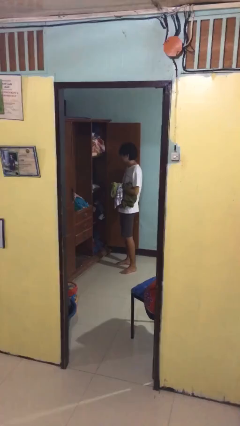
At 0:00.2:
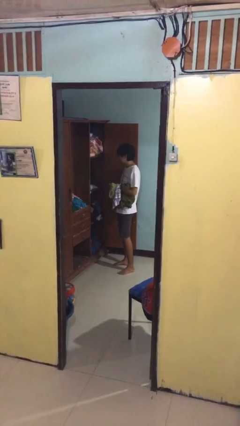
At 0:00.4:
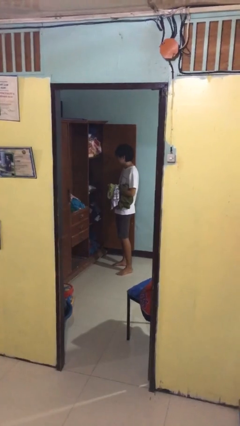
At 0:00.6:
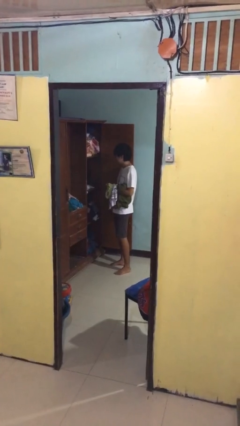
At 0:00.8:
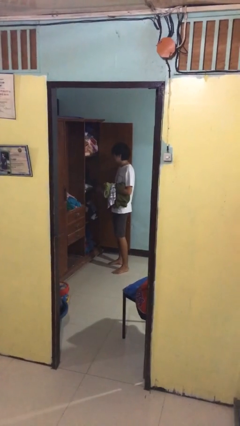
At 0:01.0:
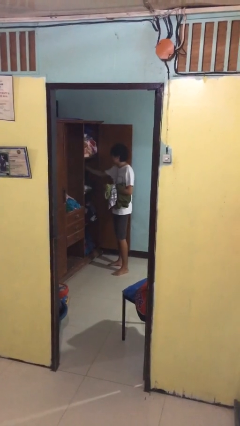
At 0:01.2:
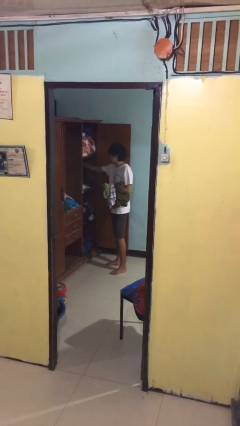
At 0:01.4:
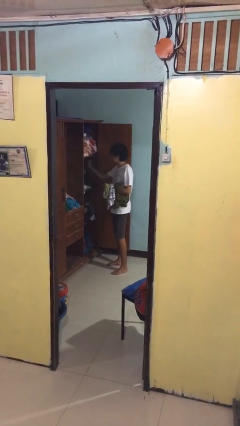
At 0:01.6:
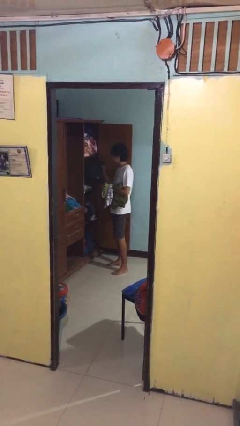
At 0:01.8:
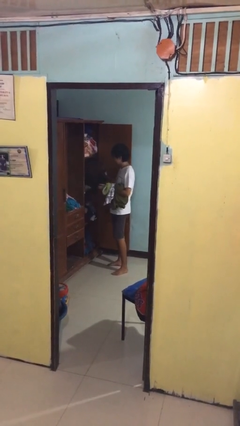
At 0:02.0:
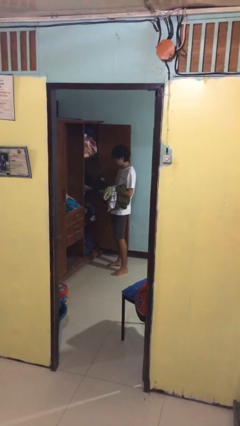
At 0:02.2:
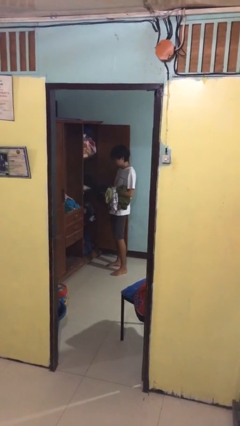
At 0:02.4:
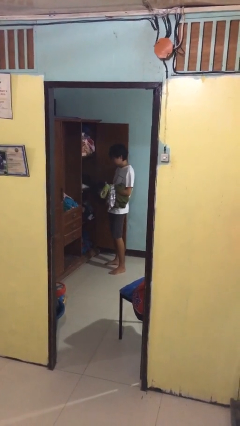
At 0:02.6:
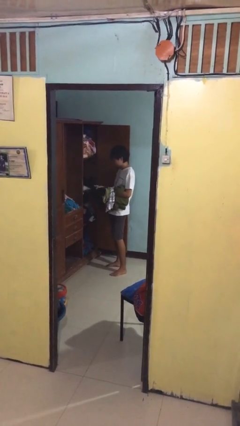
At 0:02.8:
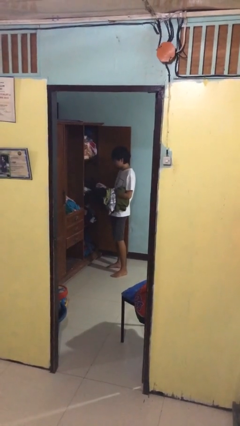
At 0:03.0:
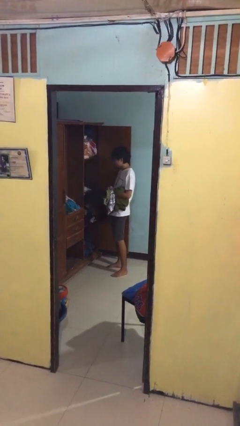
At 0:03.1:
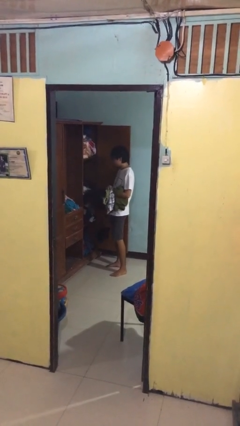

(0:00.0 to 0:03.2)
person takes clothes from dresser

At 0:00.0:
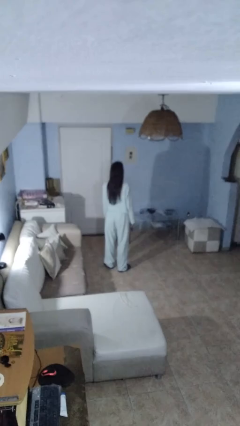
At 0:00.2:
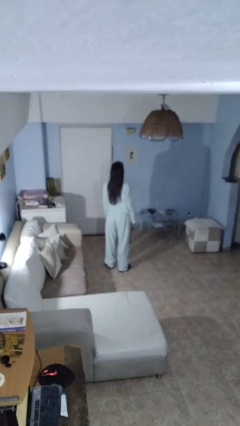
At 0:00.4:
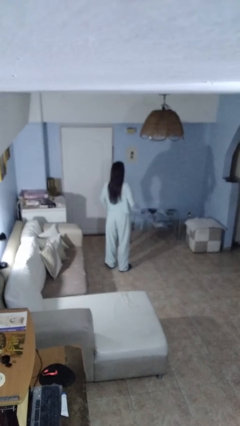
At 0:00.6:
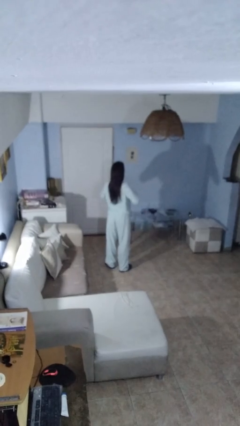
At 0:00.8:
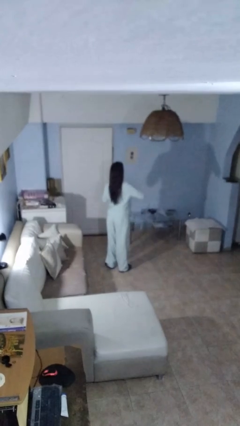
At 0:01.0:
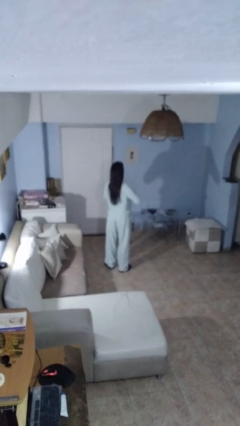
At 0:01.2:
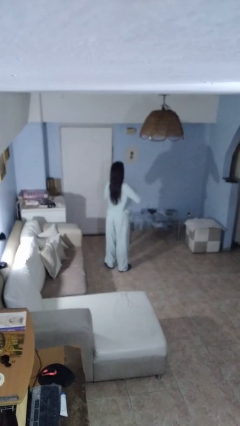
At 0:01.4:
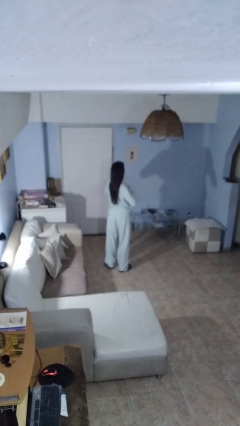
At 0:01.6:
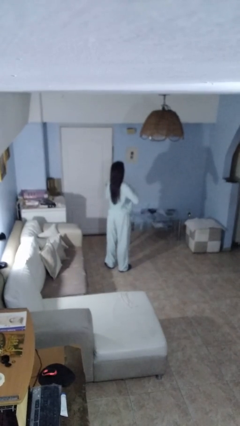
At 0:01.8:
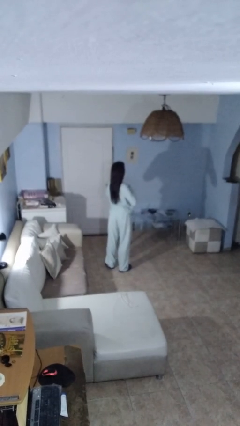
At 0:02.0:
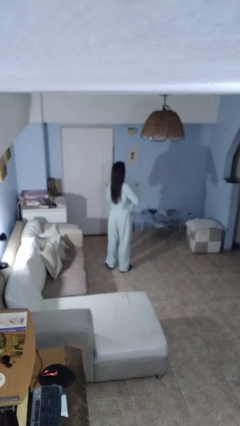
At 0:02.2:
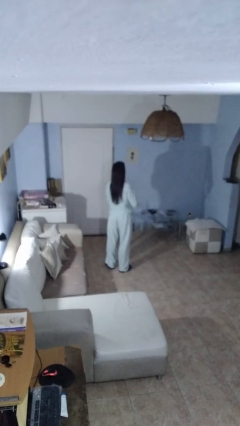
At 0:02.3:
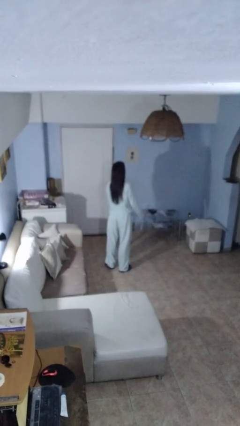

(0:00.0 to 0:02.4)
person drums on chest

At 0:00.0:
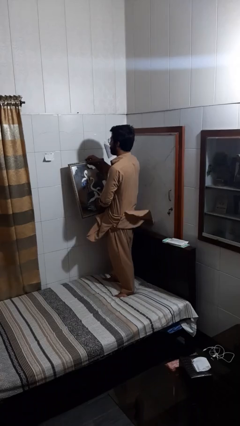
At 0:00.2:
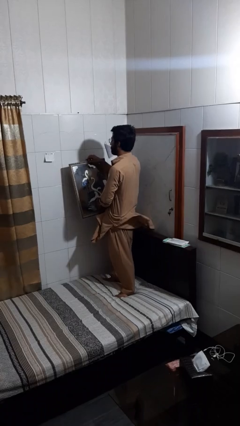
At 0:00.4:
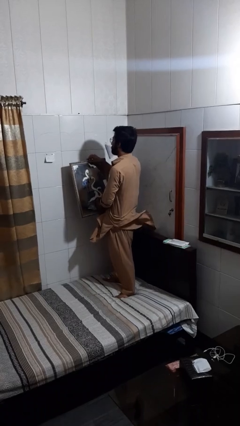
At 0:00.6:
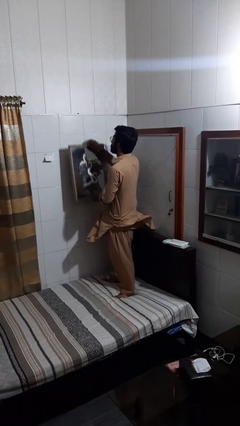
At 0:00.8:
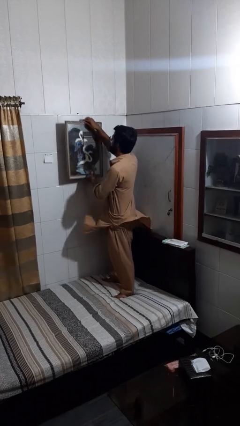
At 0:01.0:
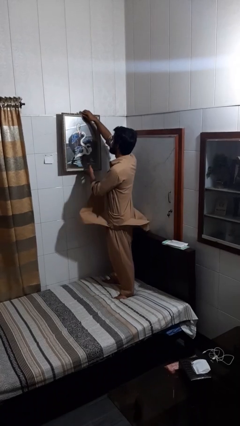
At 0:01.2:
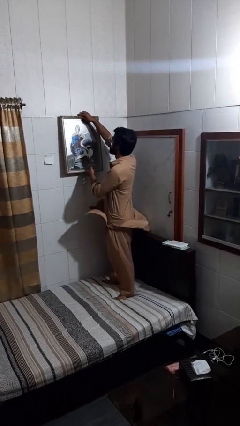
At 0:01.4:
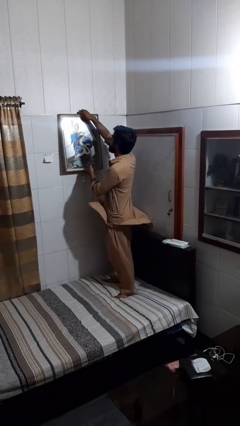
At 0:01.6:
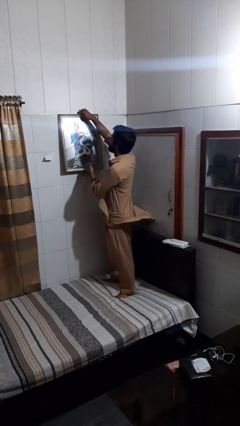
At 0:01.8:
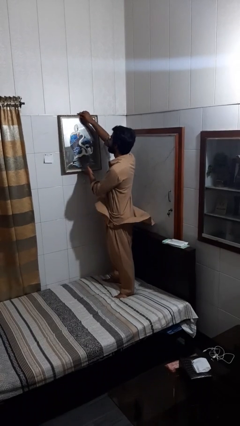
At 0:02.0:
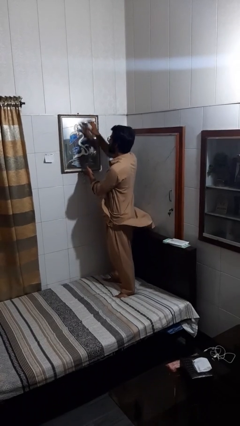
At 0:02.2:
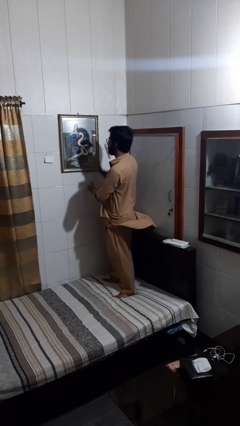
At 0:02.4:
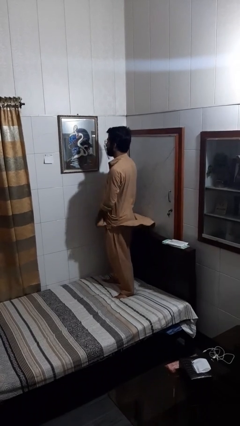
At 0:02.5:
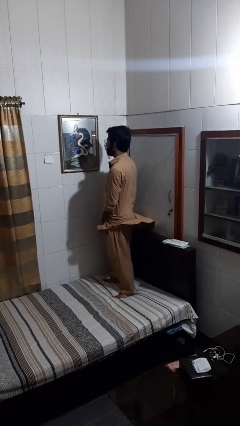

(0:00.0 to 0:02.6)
person puts up picture frame

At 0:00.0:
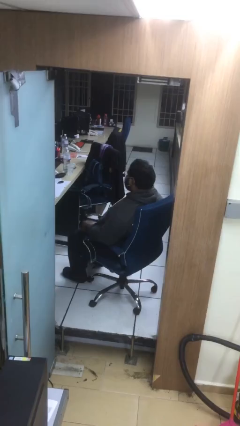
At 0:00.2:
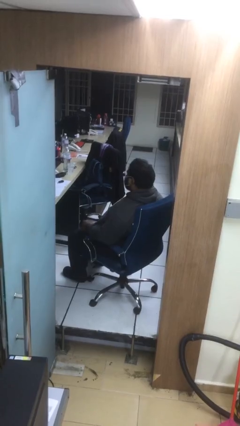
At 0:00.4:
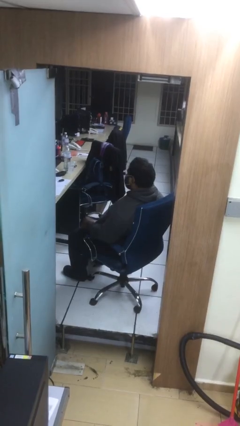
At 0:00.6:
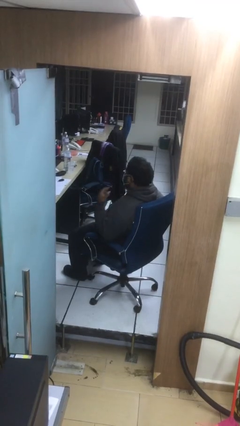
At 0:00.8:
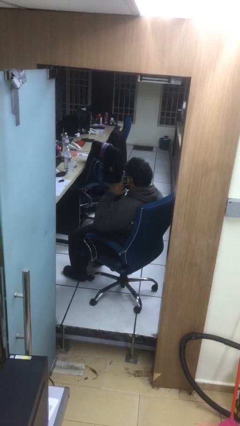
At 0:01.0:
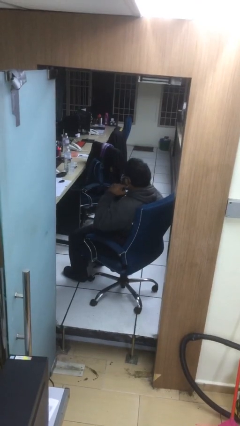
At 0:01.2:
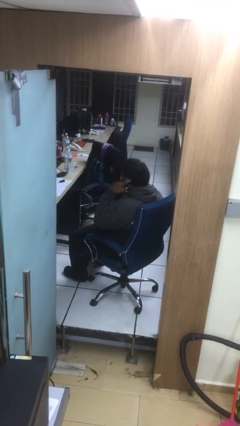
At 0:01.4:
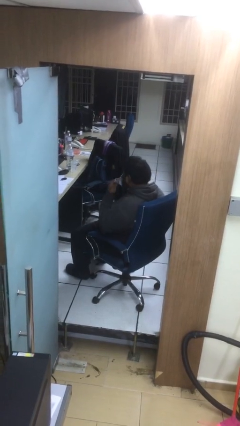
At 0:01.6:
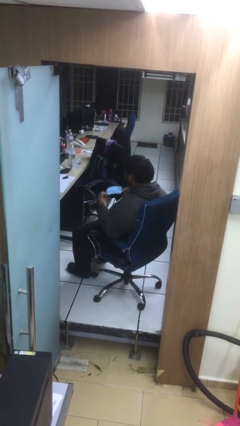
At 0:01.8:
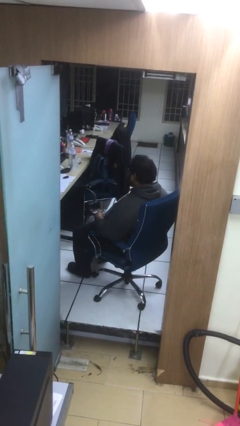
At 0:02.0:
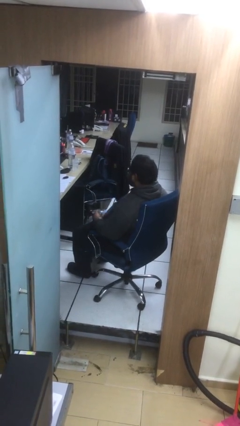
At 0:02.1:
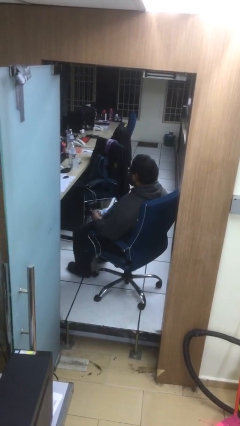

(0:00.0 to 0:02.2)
person takes off facemask

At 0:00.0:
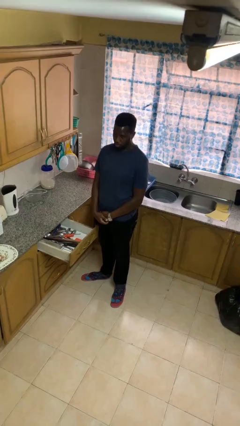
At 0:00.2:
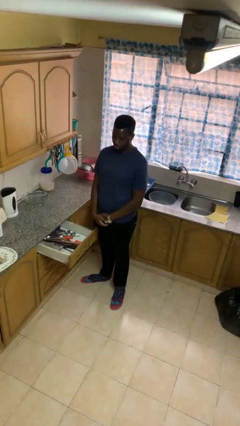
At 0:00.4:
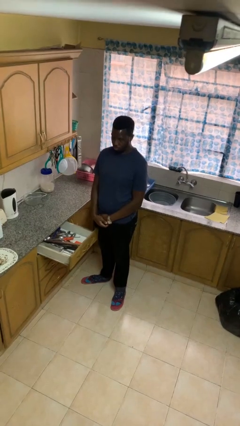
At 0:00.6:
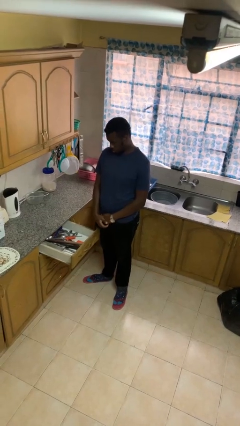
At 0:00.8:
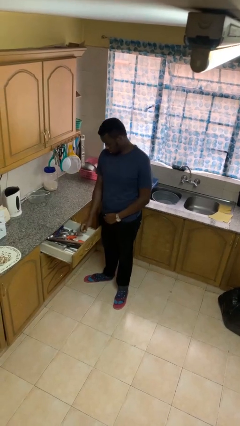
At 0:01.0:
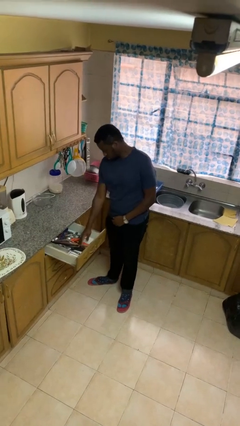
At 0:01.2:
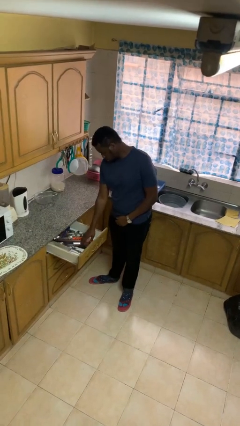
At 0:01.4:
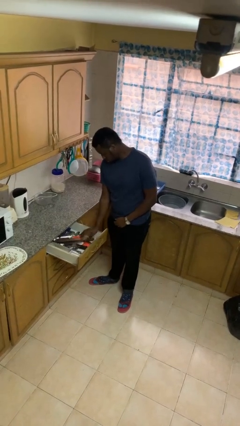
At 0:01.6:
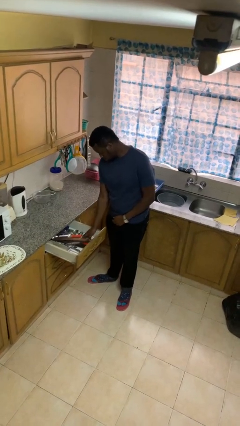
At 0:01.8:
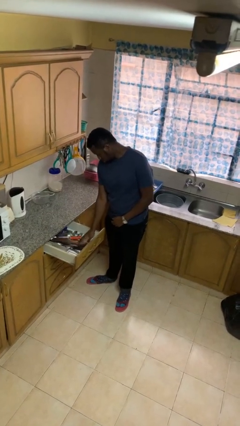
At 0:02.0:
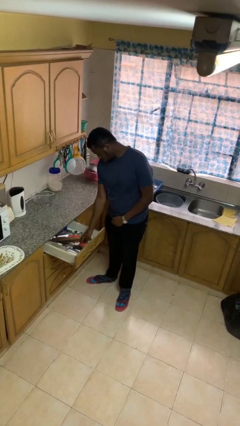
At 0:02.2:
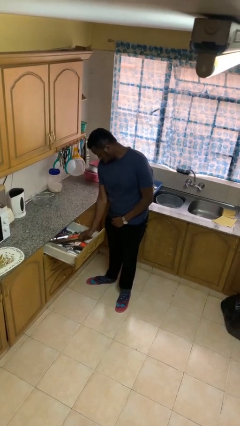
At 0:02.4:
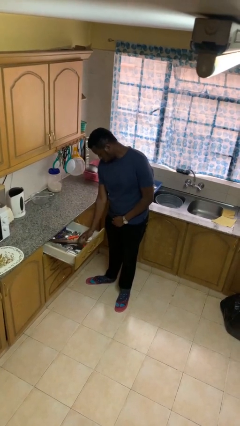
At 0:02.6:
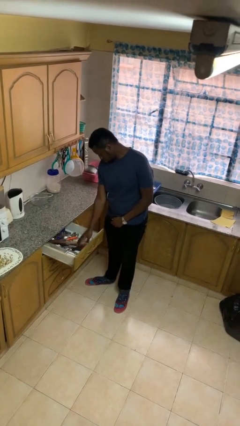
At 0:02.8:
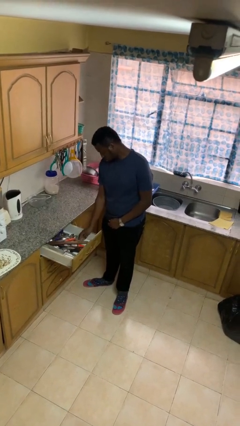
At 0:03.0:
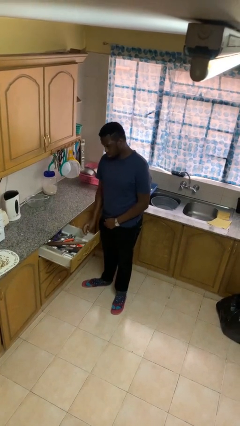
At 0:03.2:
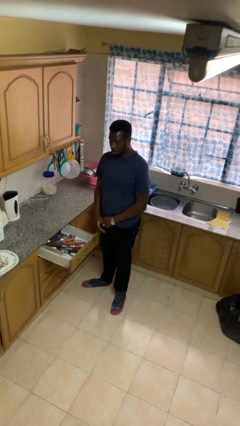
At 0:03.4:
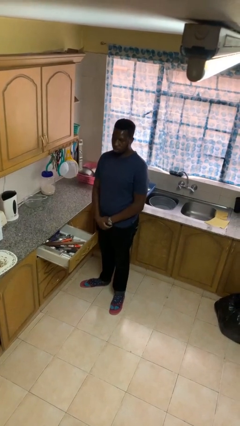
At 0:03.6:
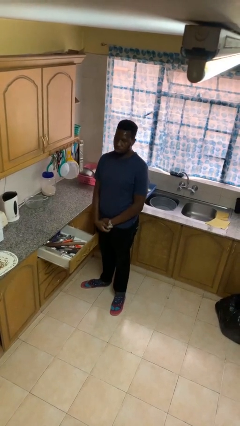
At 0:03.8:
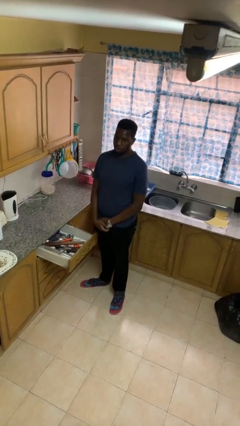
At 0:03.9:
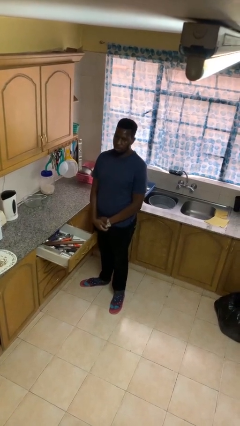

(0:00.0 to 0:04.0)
person searches in kitchen drawer

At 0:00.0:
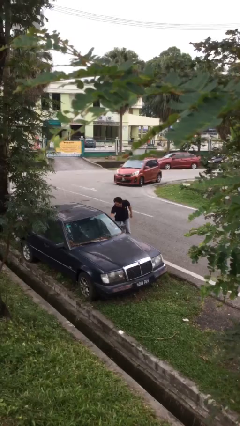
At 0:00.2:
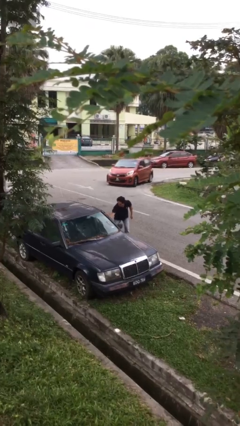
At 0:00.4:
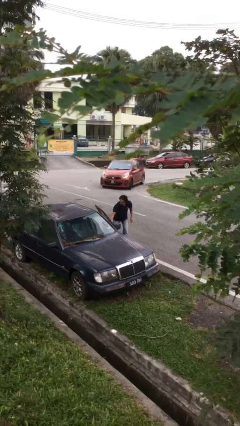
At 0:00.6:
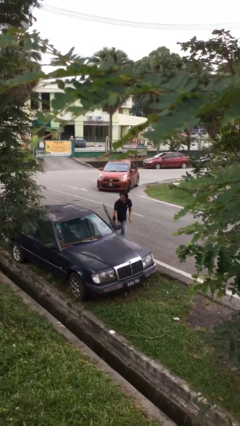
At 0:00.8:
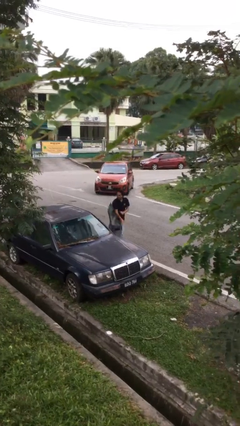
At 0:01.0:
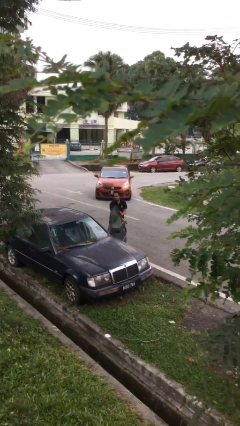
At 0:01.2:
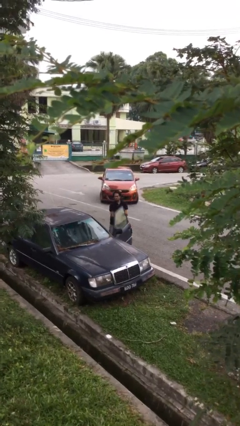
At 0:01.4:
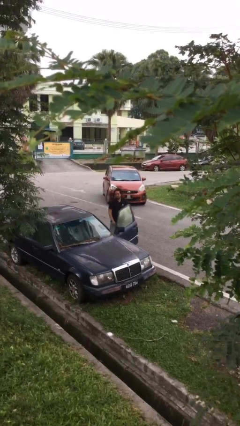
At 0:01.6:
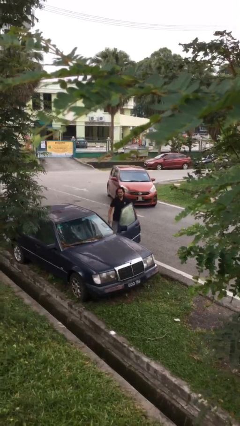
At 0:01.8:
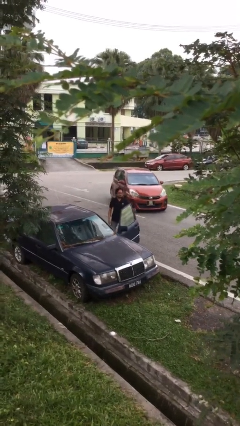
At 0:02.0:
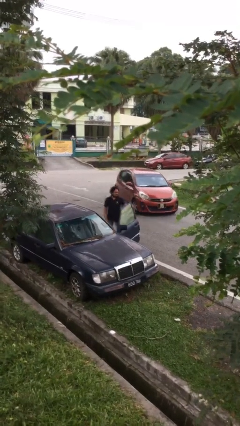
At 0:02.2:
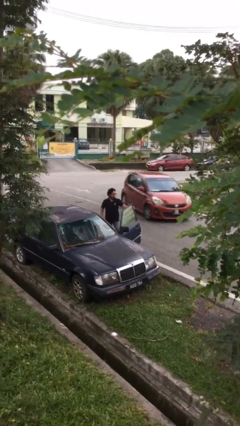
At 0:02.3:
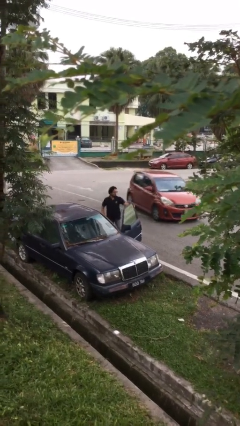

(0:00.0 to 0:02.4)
person opens car door

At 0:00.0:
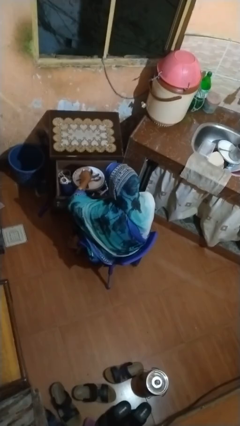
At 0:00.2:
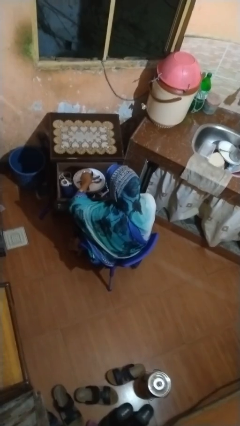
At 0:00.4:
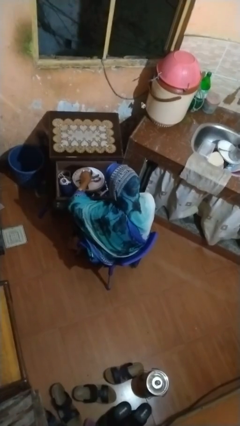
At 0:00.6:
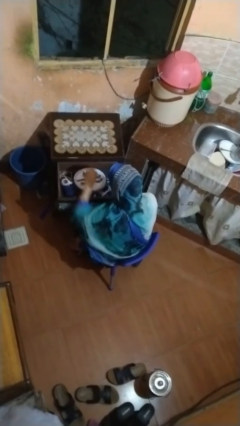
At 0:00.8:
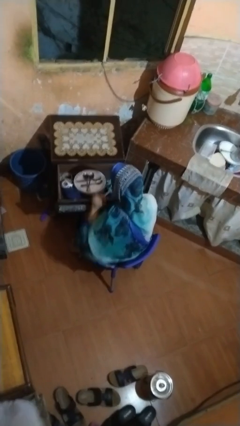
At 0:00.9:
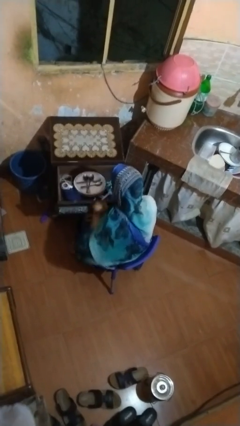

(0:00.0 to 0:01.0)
person puts object into kitchen drawer
